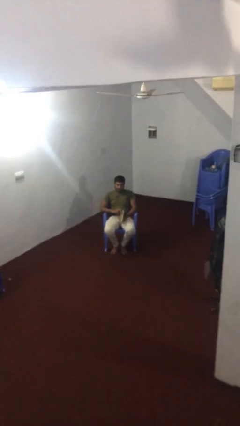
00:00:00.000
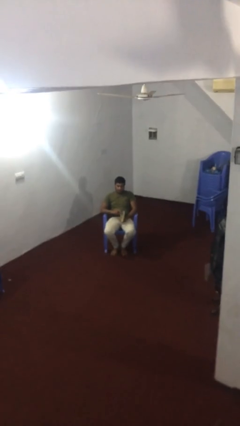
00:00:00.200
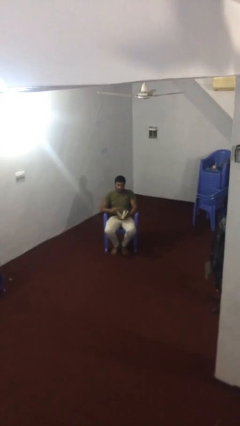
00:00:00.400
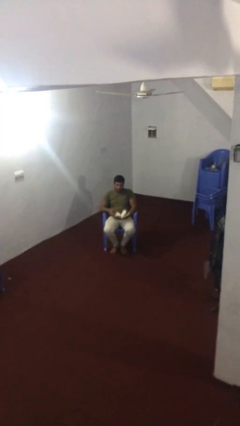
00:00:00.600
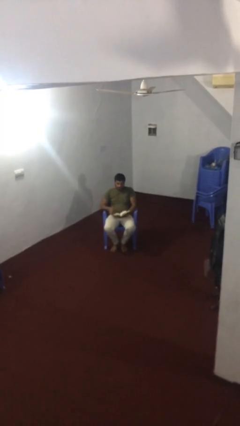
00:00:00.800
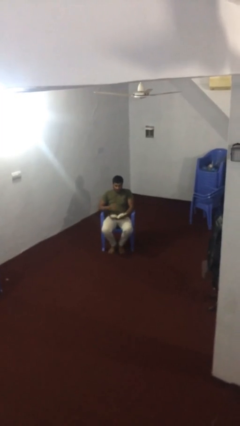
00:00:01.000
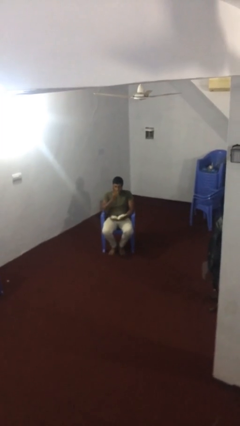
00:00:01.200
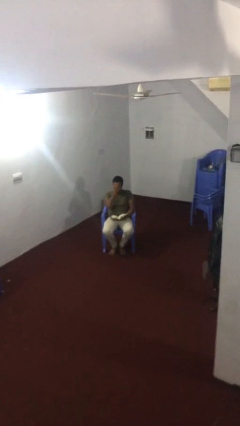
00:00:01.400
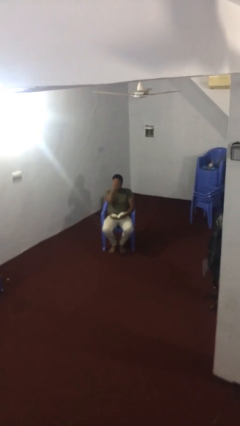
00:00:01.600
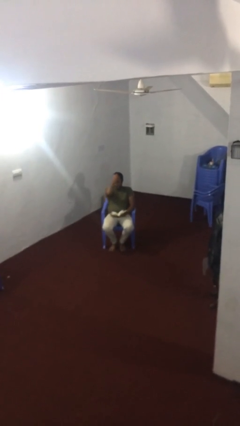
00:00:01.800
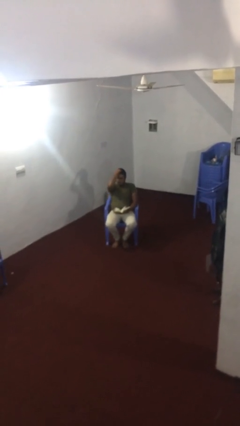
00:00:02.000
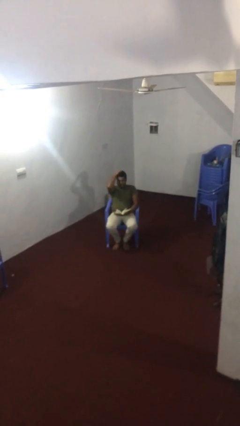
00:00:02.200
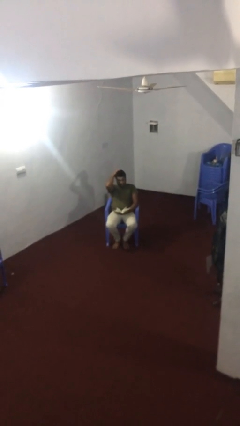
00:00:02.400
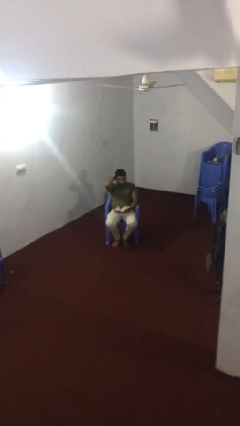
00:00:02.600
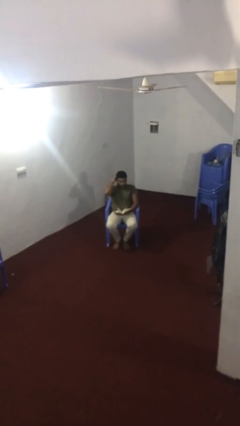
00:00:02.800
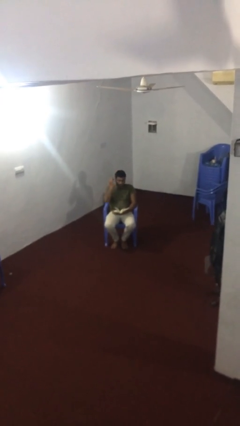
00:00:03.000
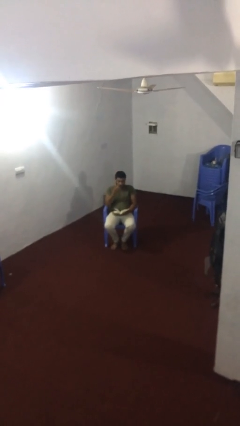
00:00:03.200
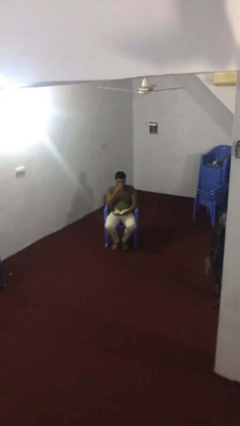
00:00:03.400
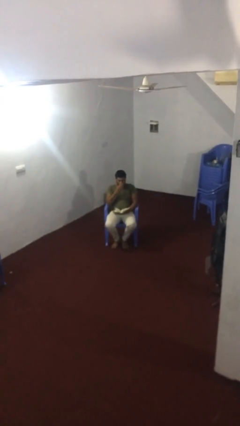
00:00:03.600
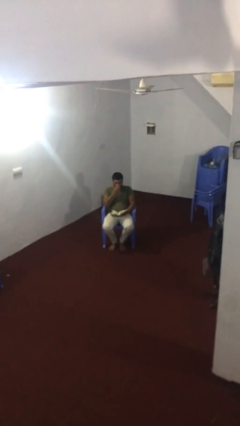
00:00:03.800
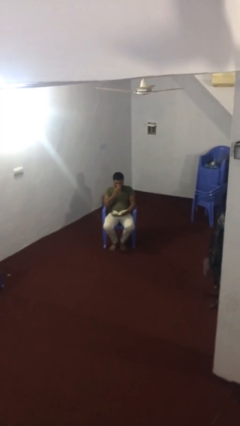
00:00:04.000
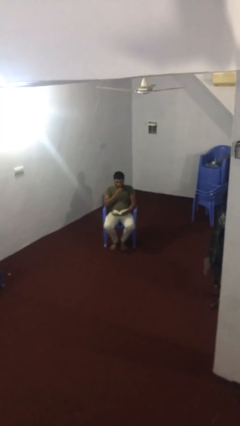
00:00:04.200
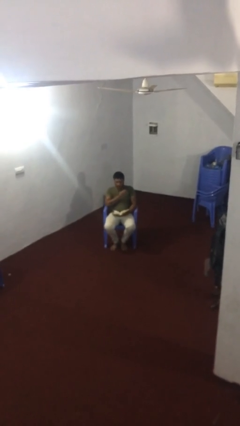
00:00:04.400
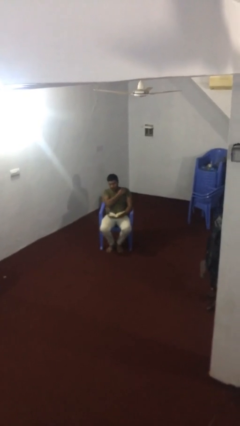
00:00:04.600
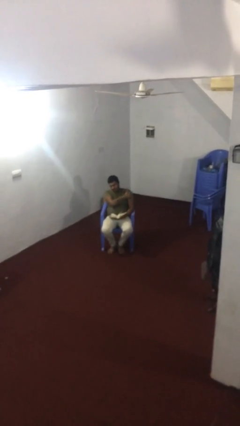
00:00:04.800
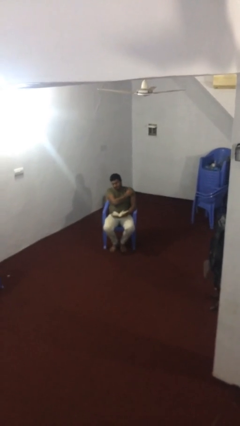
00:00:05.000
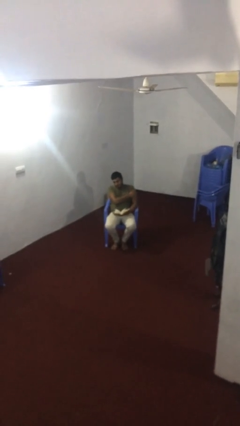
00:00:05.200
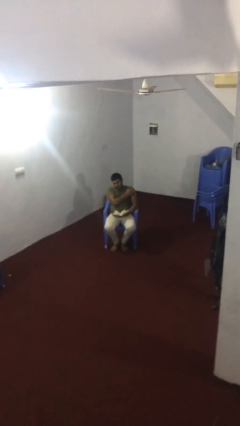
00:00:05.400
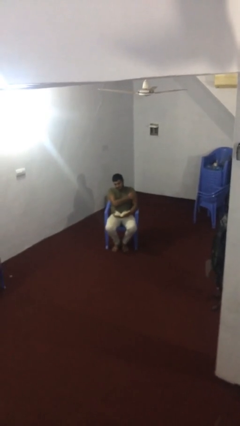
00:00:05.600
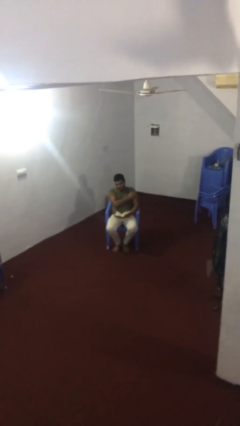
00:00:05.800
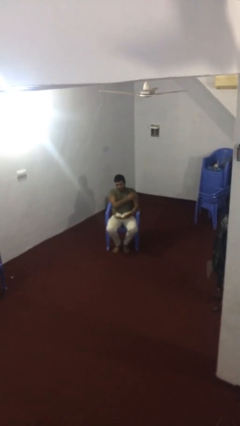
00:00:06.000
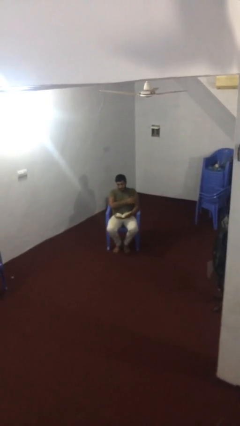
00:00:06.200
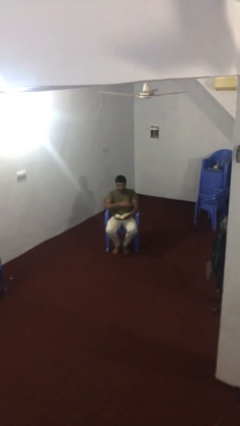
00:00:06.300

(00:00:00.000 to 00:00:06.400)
person reads document

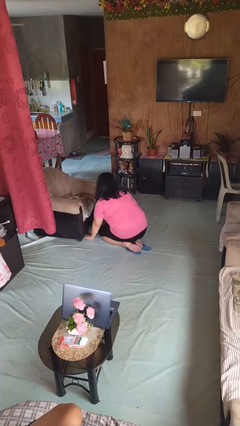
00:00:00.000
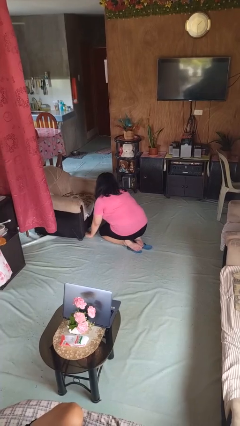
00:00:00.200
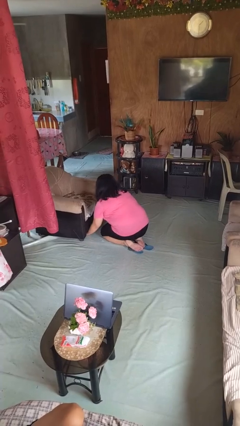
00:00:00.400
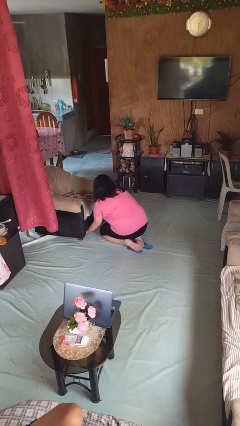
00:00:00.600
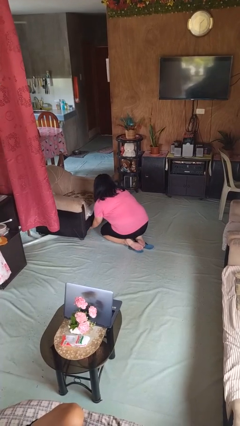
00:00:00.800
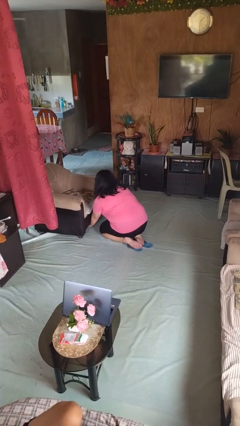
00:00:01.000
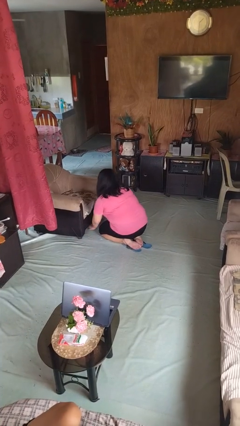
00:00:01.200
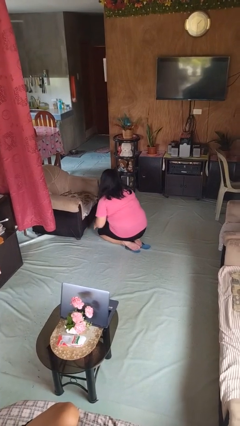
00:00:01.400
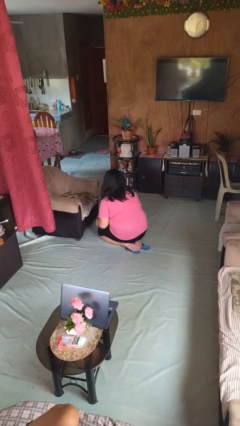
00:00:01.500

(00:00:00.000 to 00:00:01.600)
person searches under couch

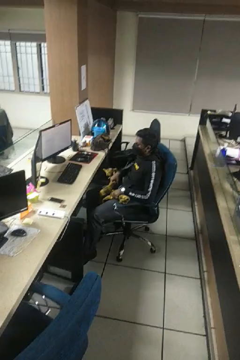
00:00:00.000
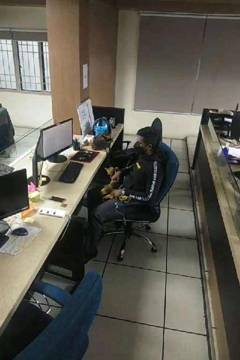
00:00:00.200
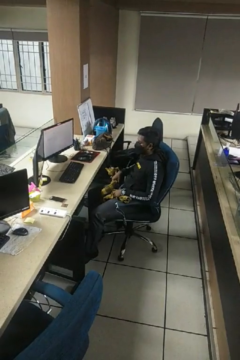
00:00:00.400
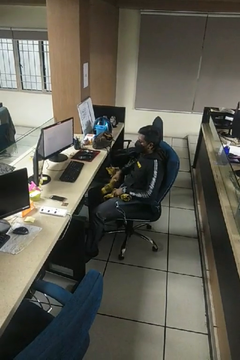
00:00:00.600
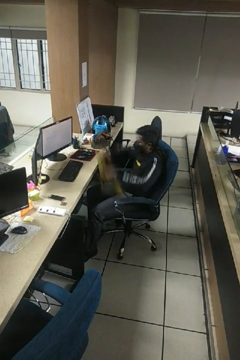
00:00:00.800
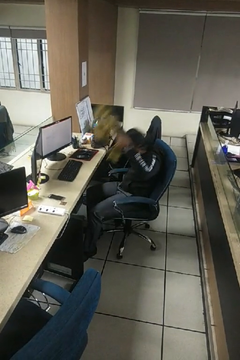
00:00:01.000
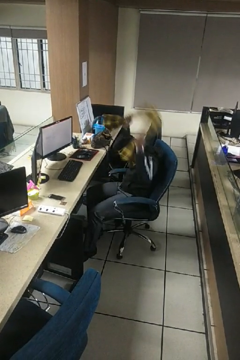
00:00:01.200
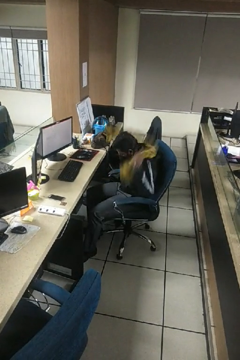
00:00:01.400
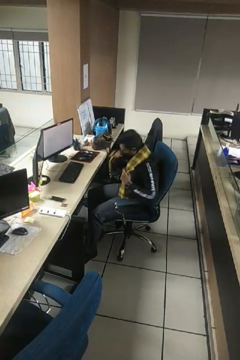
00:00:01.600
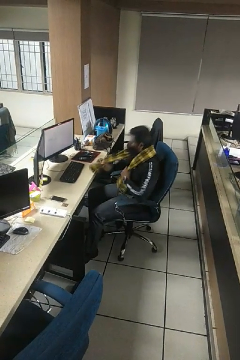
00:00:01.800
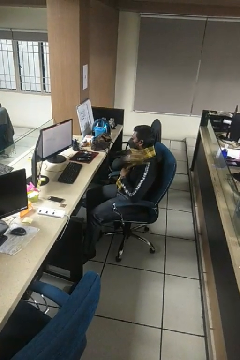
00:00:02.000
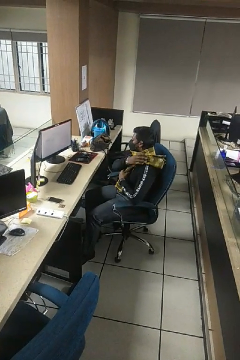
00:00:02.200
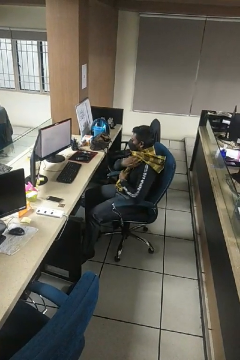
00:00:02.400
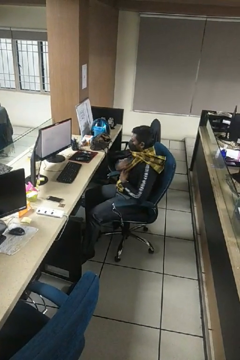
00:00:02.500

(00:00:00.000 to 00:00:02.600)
person puts on scarf

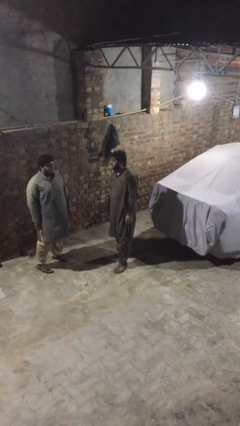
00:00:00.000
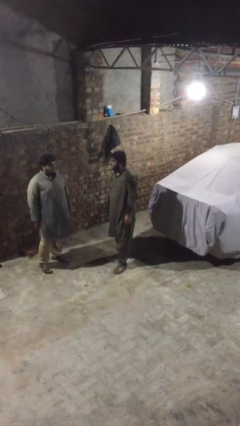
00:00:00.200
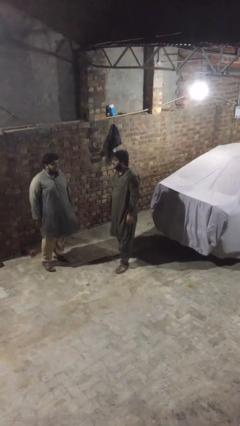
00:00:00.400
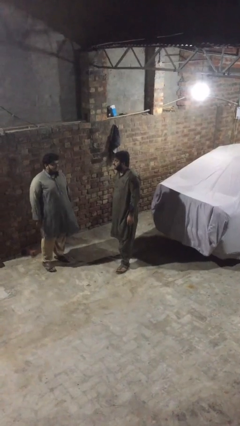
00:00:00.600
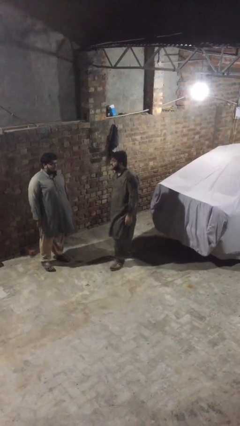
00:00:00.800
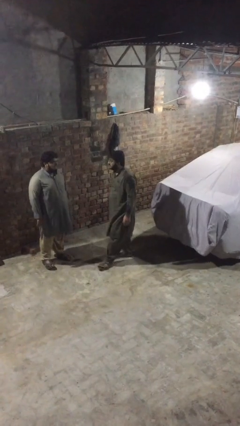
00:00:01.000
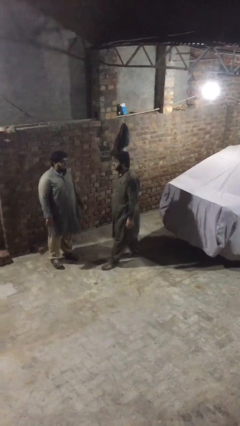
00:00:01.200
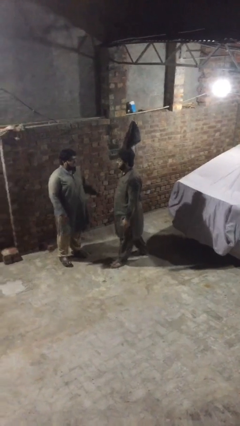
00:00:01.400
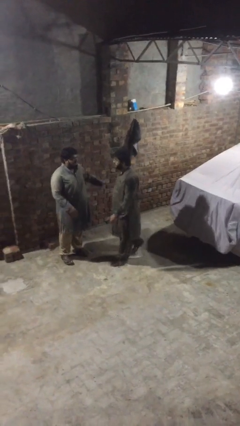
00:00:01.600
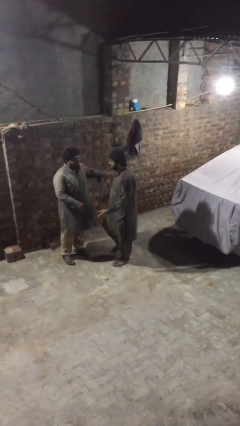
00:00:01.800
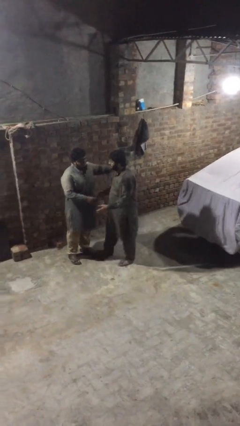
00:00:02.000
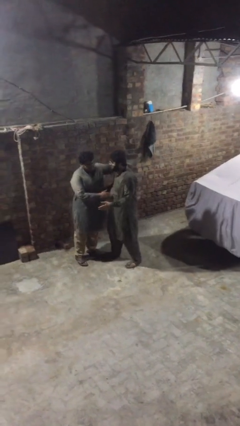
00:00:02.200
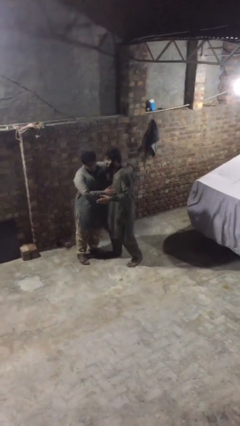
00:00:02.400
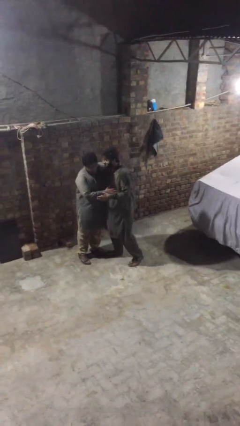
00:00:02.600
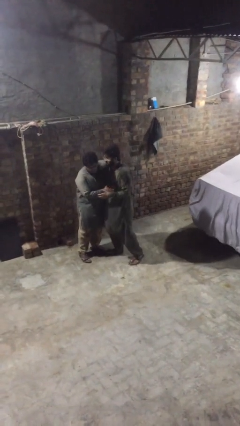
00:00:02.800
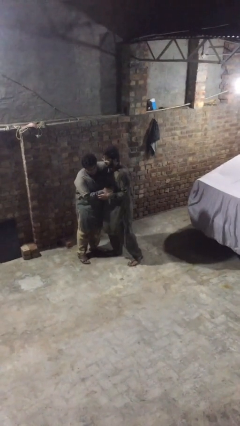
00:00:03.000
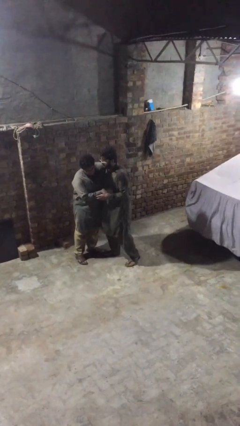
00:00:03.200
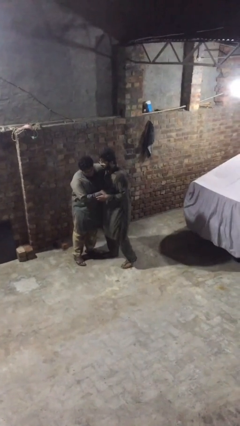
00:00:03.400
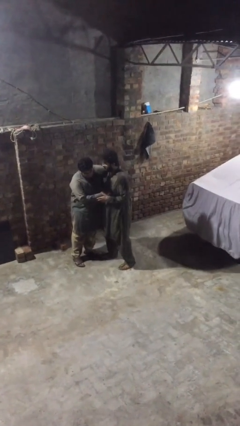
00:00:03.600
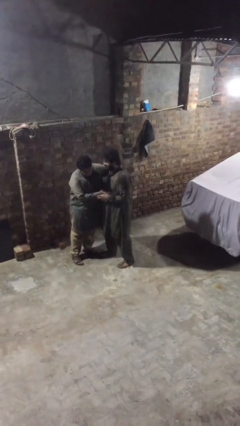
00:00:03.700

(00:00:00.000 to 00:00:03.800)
person embraces person

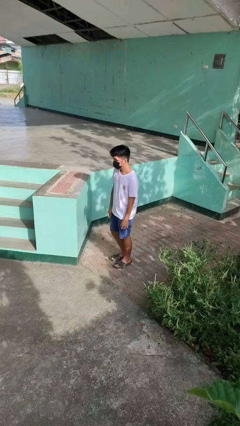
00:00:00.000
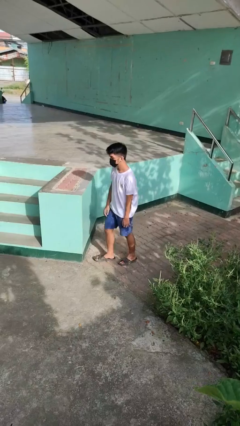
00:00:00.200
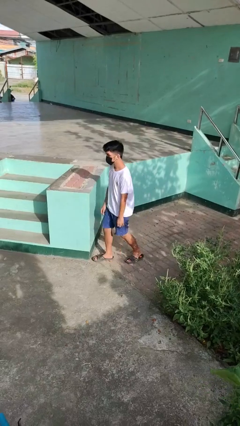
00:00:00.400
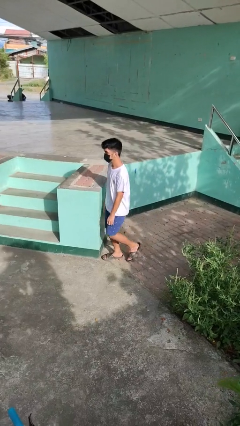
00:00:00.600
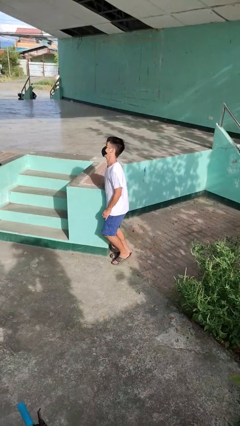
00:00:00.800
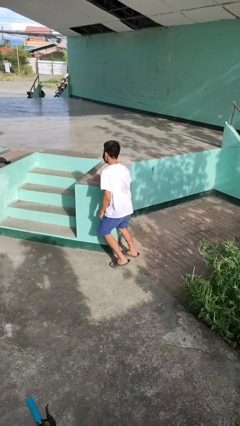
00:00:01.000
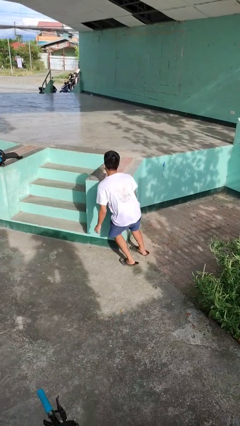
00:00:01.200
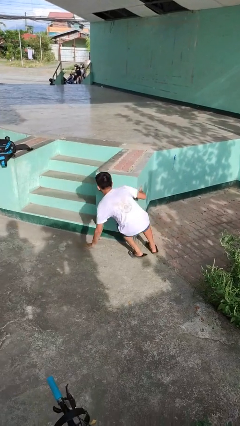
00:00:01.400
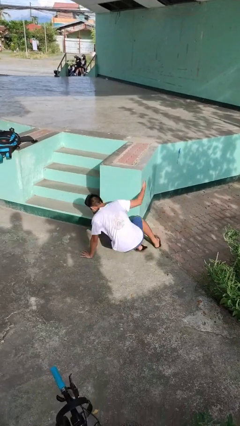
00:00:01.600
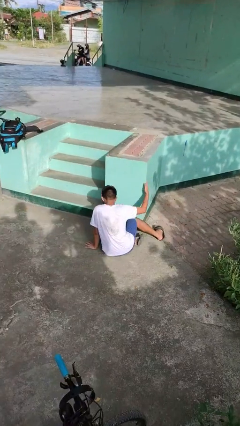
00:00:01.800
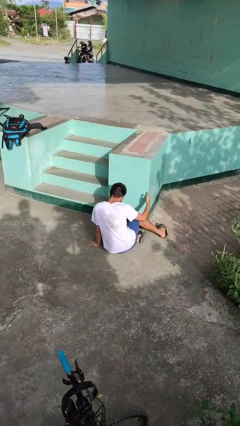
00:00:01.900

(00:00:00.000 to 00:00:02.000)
person trips on object on floor

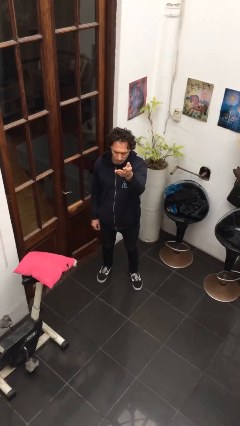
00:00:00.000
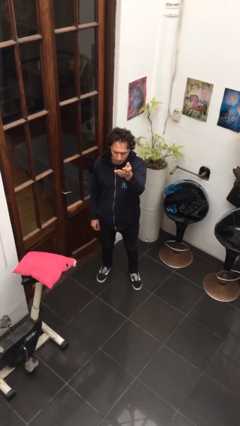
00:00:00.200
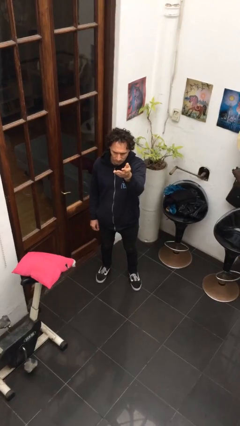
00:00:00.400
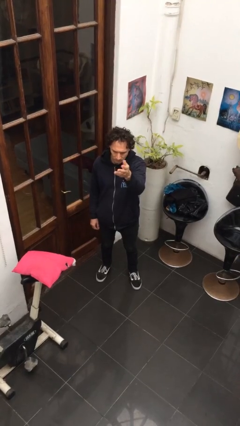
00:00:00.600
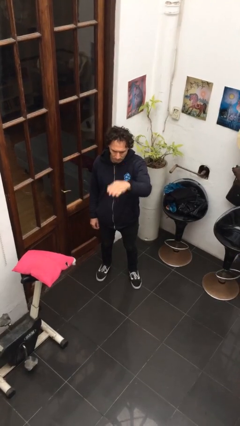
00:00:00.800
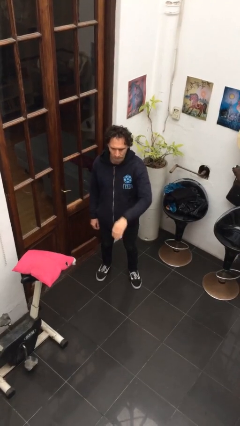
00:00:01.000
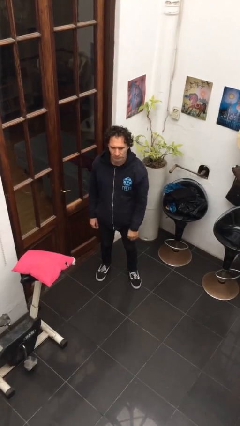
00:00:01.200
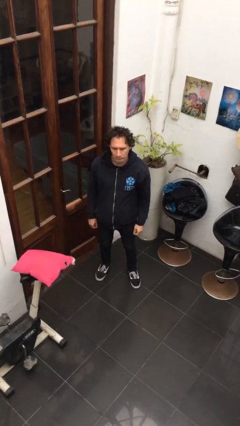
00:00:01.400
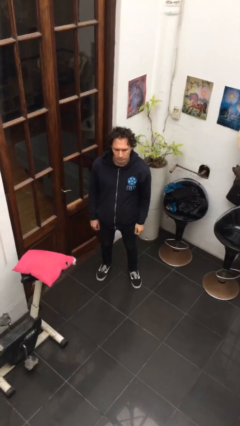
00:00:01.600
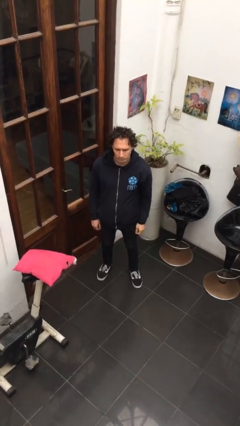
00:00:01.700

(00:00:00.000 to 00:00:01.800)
person gestures swipe down
